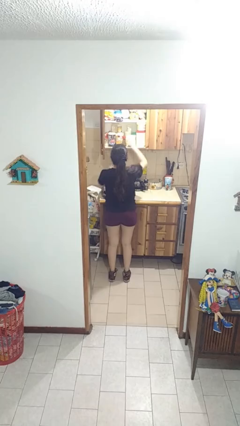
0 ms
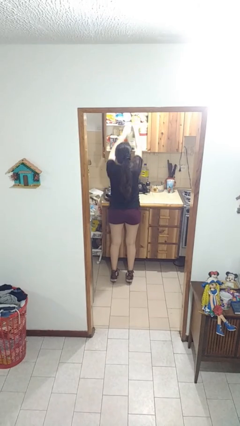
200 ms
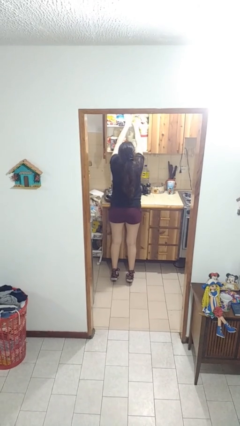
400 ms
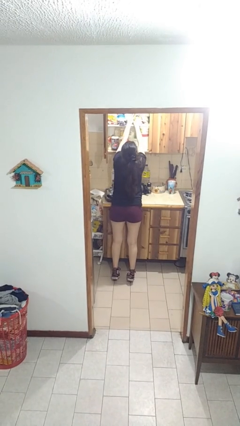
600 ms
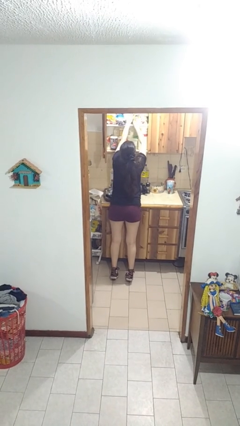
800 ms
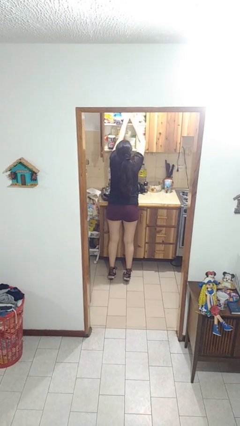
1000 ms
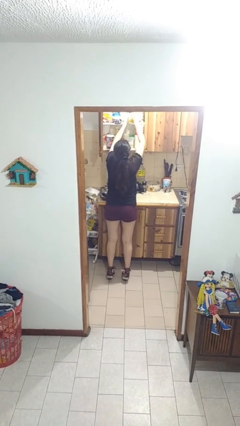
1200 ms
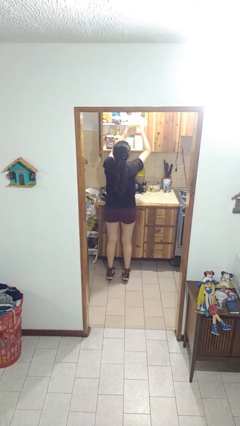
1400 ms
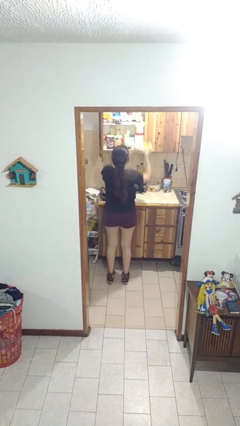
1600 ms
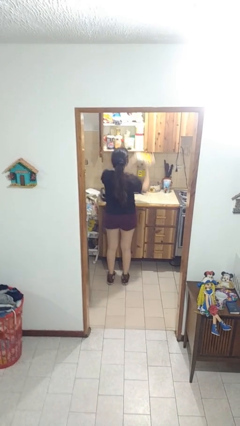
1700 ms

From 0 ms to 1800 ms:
person takes object from cabinet

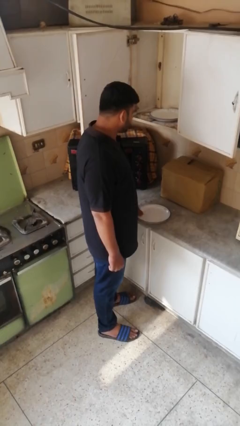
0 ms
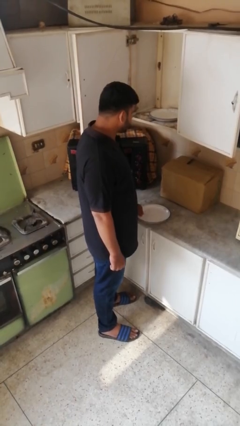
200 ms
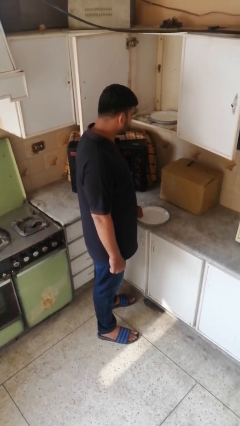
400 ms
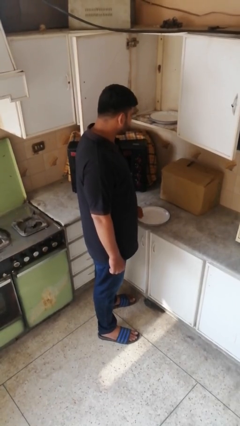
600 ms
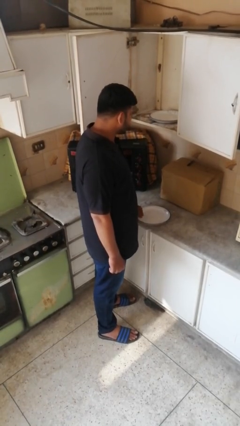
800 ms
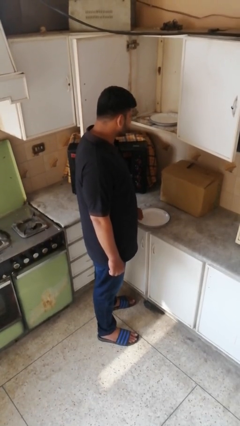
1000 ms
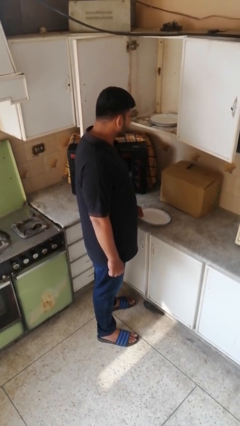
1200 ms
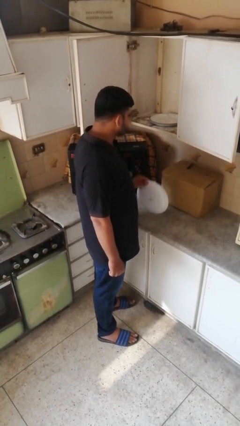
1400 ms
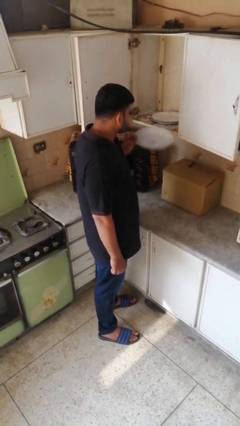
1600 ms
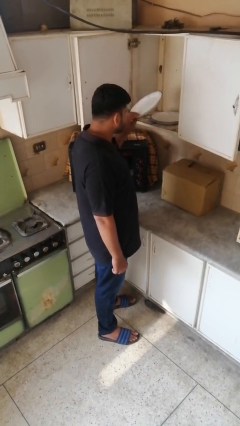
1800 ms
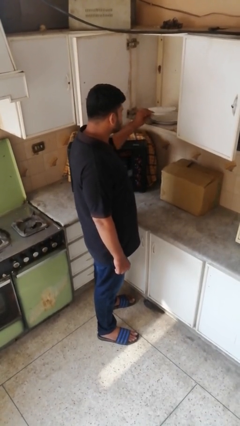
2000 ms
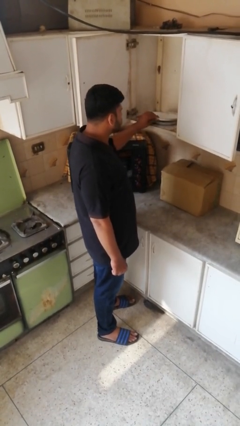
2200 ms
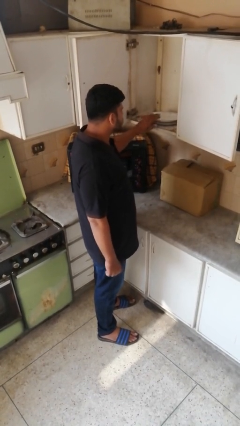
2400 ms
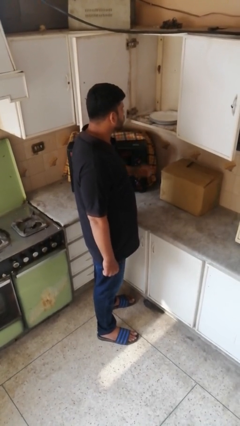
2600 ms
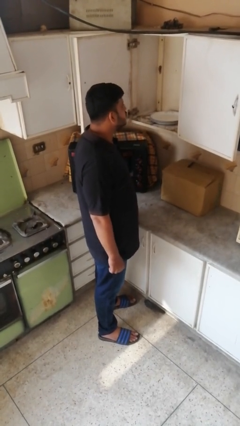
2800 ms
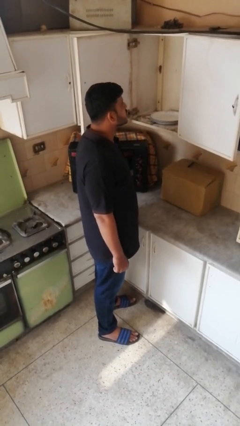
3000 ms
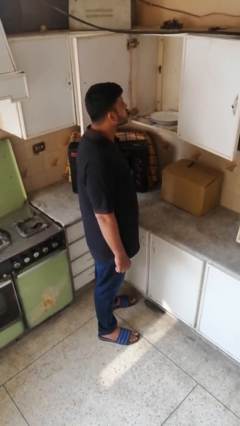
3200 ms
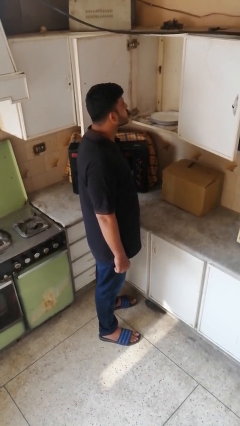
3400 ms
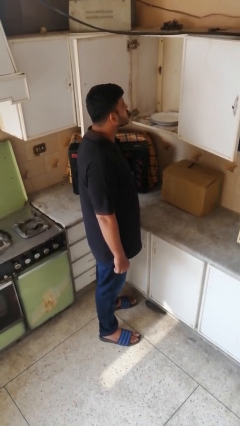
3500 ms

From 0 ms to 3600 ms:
person puts object in cabinet

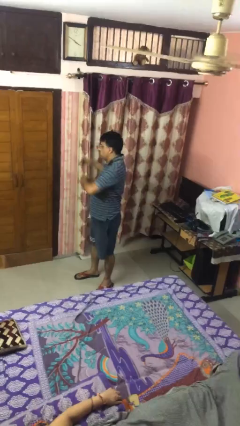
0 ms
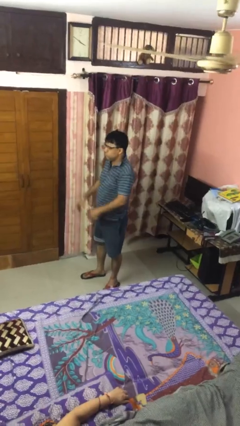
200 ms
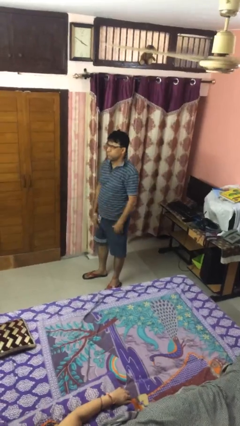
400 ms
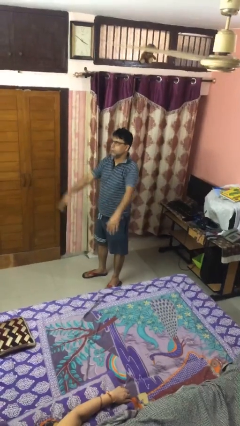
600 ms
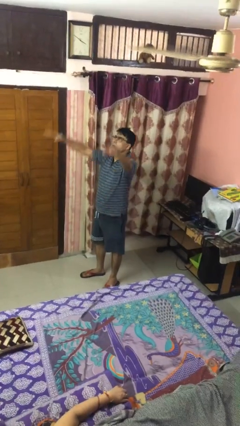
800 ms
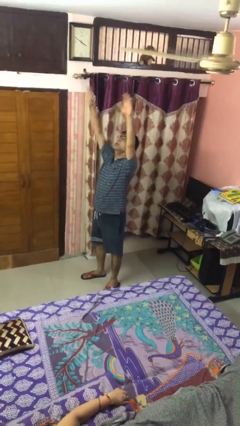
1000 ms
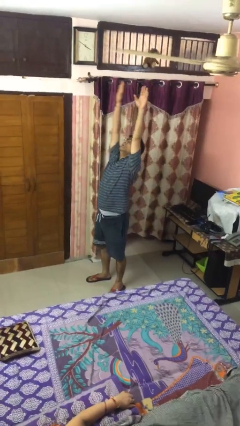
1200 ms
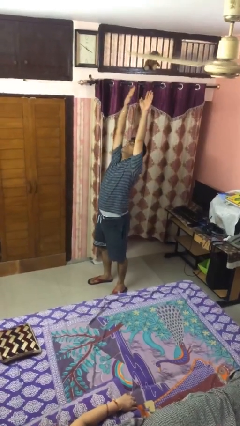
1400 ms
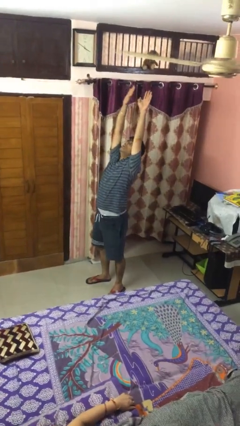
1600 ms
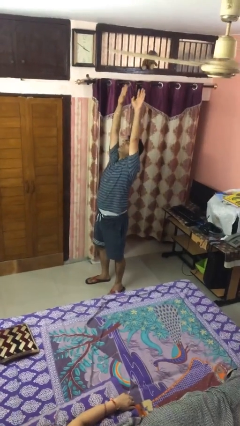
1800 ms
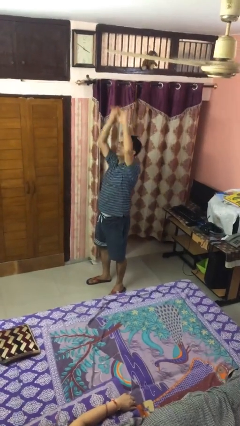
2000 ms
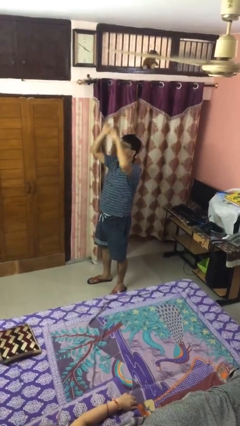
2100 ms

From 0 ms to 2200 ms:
person stretches arms over head

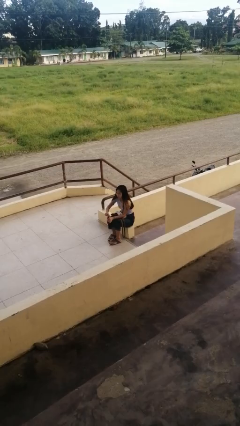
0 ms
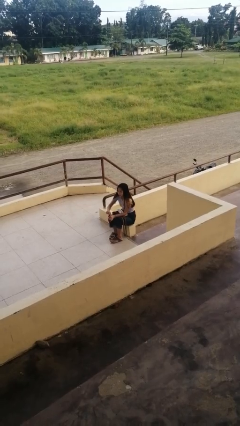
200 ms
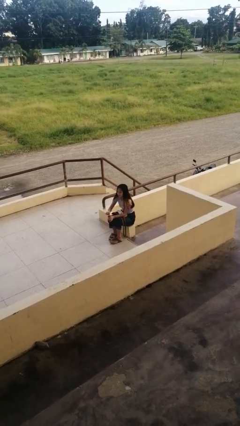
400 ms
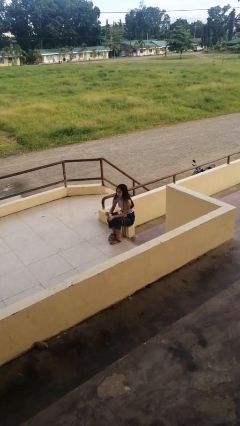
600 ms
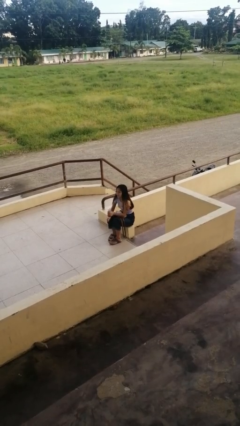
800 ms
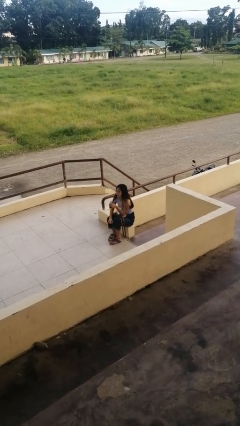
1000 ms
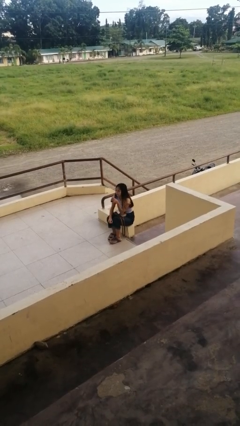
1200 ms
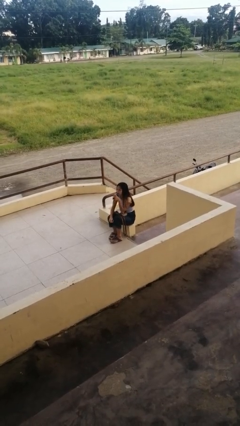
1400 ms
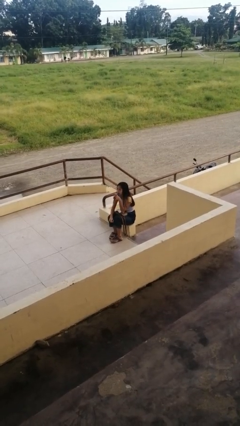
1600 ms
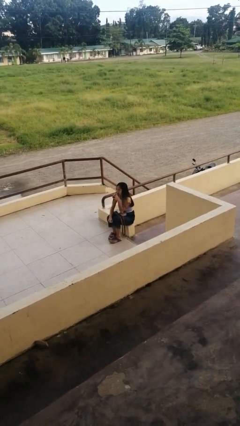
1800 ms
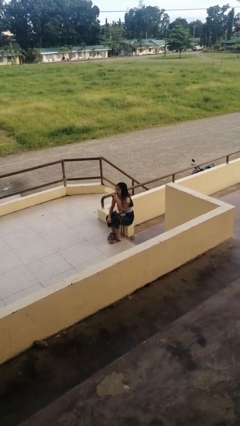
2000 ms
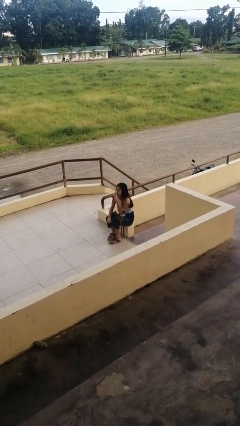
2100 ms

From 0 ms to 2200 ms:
person drinks from beverage can

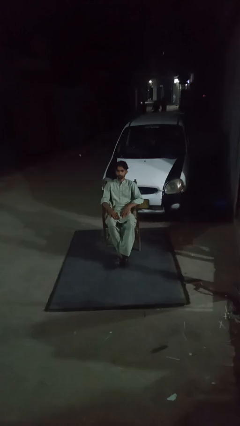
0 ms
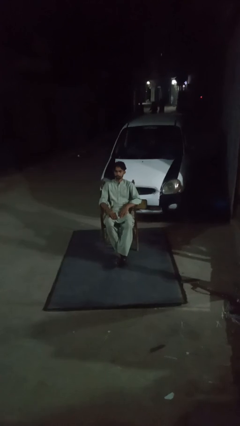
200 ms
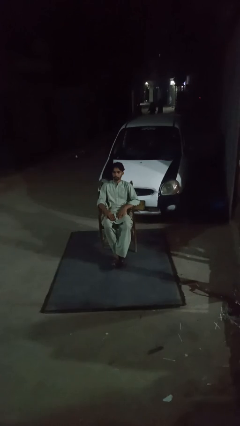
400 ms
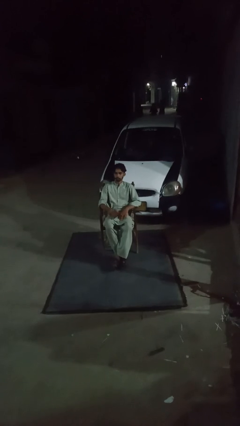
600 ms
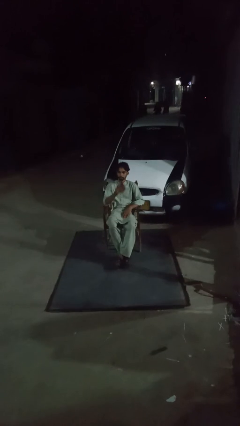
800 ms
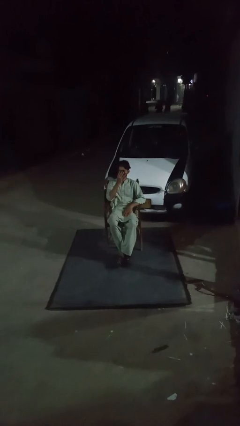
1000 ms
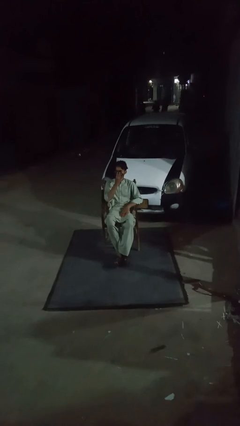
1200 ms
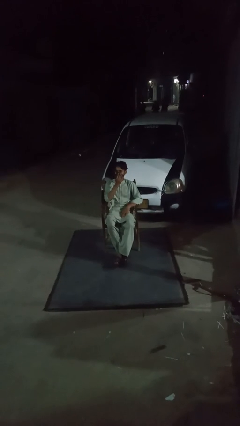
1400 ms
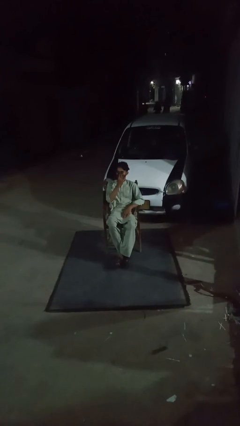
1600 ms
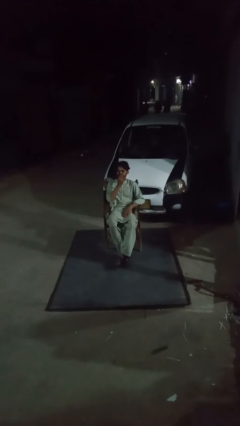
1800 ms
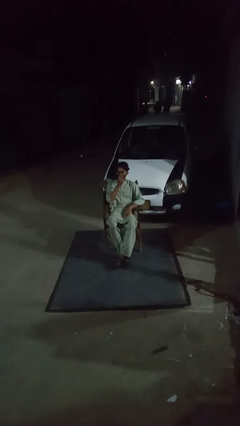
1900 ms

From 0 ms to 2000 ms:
person wipes mouth with napkin

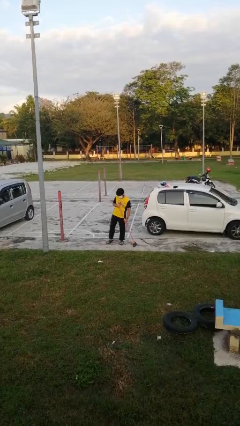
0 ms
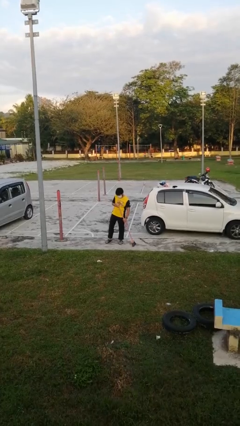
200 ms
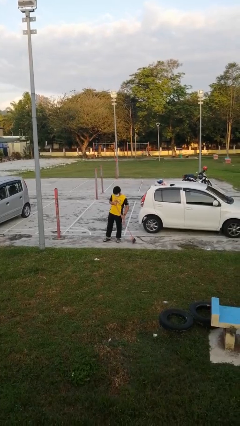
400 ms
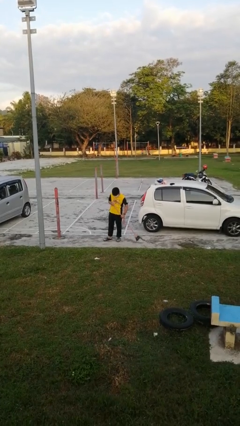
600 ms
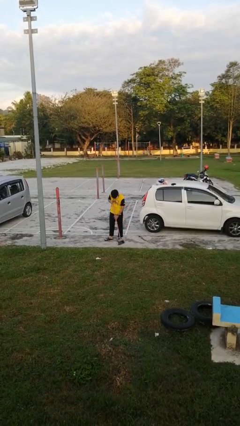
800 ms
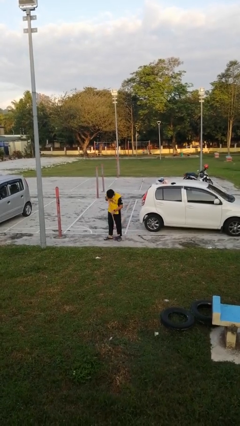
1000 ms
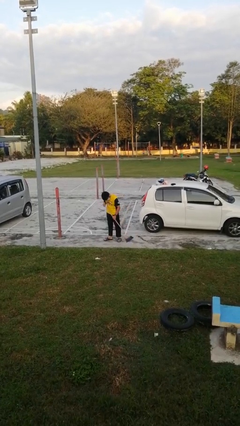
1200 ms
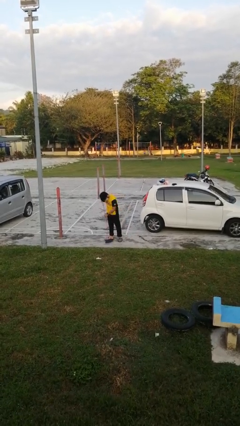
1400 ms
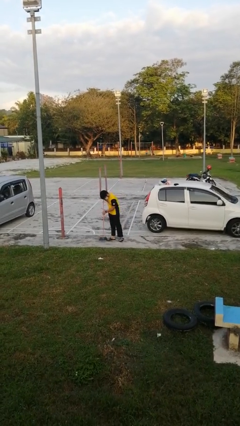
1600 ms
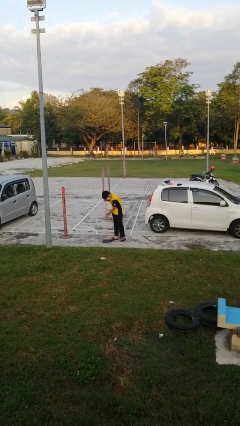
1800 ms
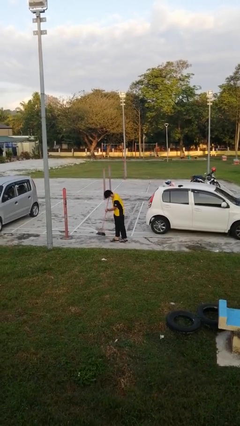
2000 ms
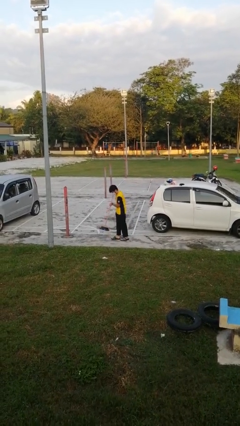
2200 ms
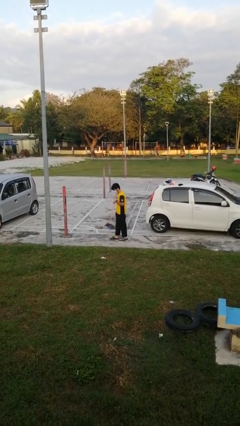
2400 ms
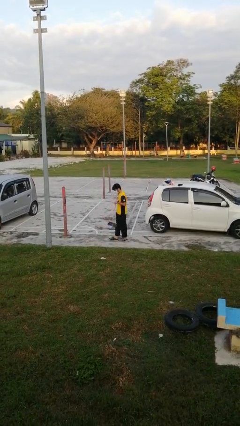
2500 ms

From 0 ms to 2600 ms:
person sweeps floor

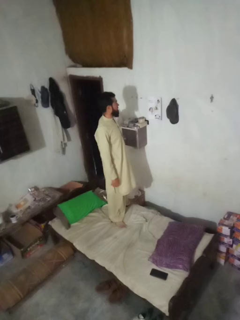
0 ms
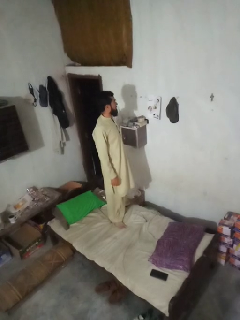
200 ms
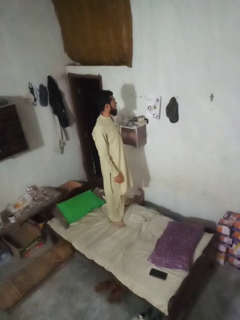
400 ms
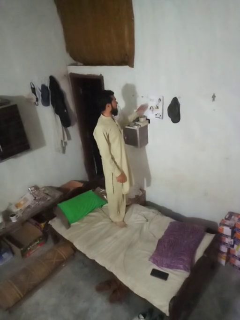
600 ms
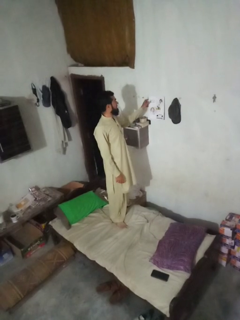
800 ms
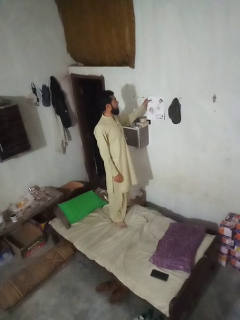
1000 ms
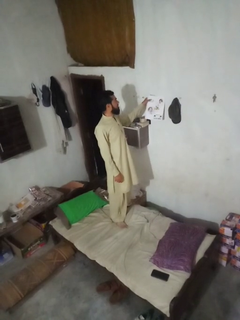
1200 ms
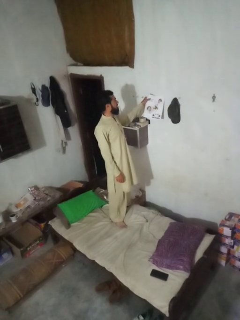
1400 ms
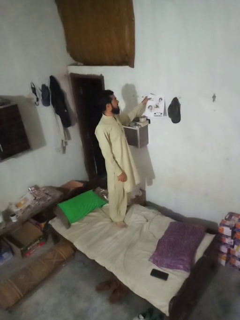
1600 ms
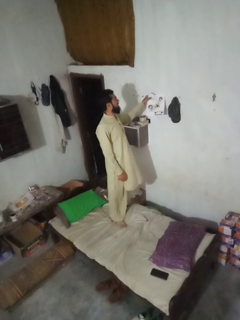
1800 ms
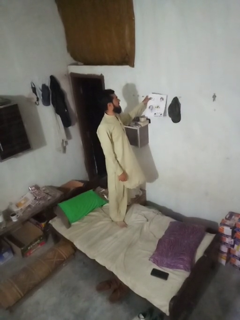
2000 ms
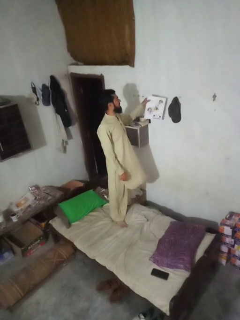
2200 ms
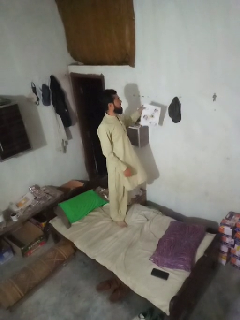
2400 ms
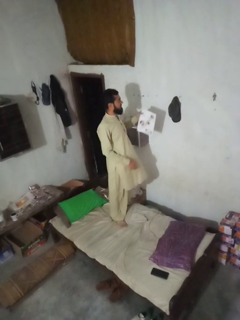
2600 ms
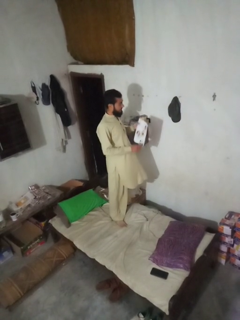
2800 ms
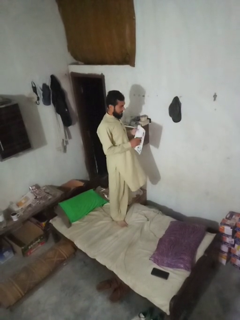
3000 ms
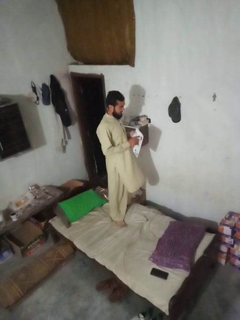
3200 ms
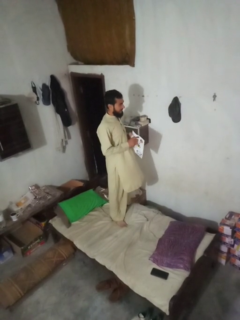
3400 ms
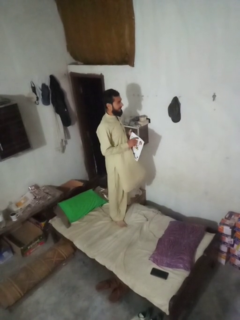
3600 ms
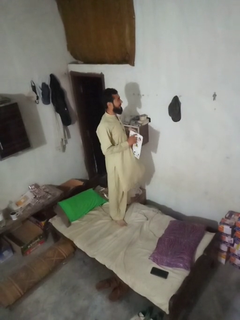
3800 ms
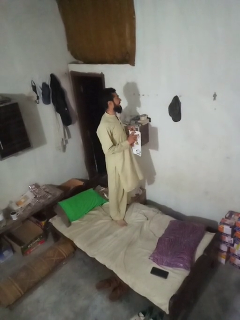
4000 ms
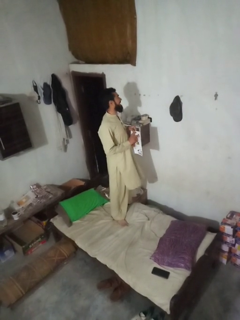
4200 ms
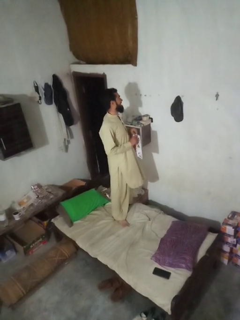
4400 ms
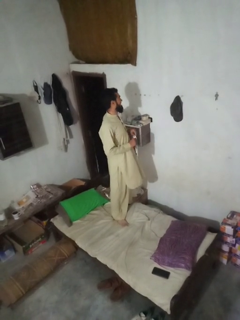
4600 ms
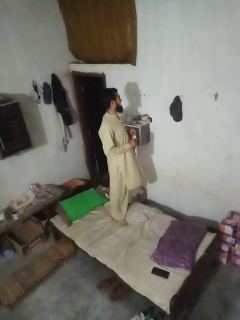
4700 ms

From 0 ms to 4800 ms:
person takes down picture frame
